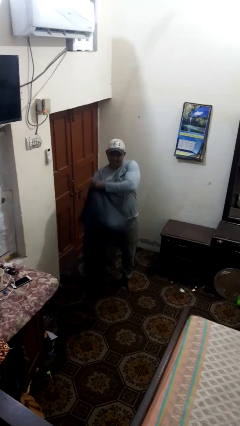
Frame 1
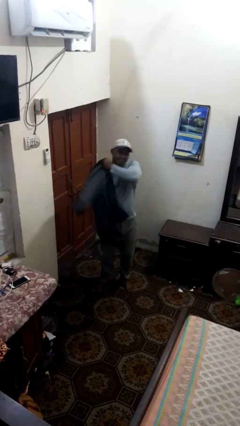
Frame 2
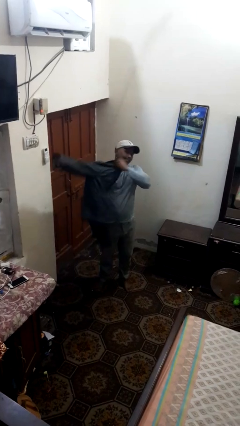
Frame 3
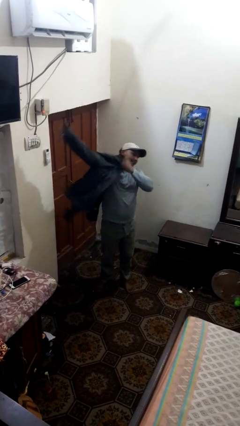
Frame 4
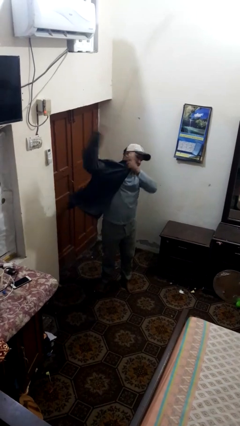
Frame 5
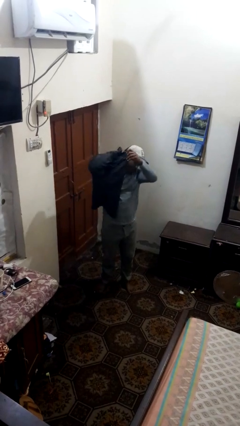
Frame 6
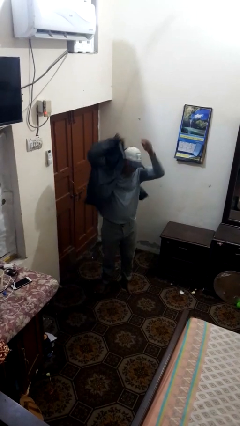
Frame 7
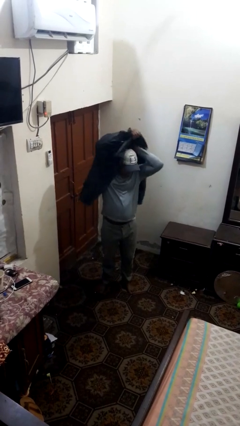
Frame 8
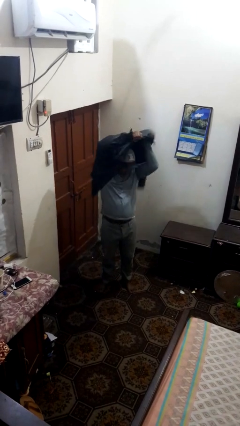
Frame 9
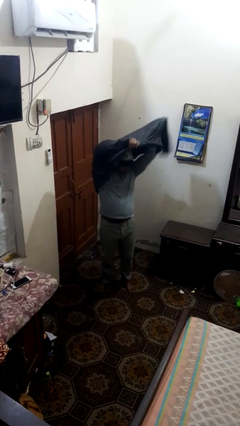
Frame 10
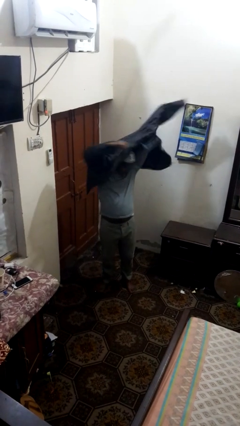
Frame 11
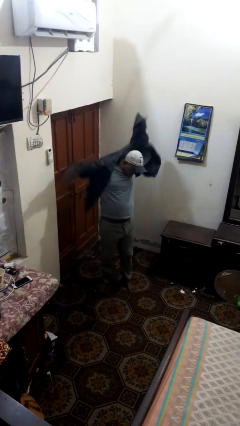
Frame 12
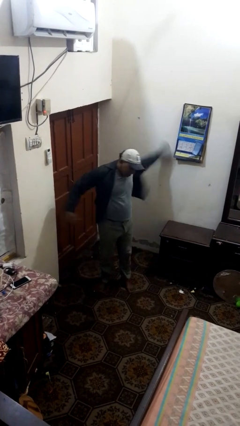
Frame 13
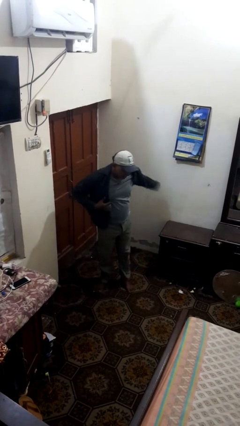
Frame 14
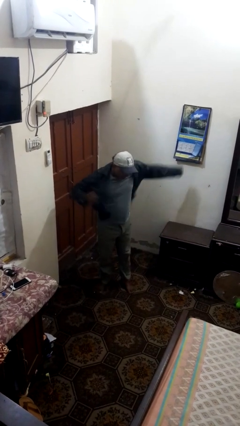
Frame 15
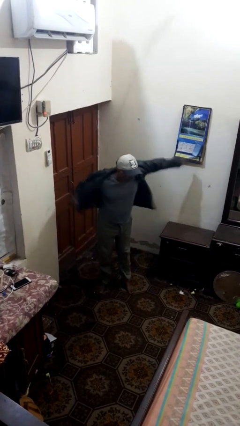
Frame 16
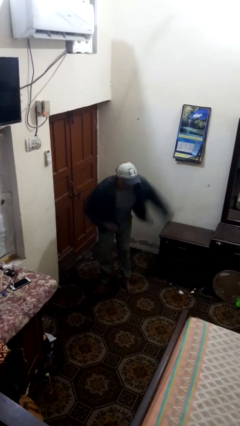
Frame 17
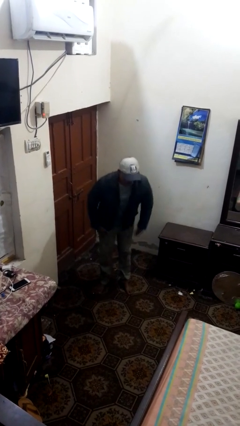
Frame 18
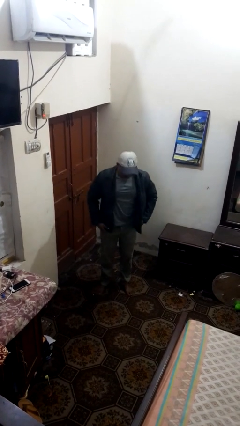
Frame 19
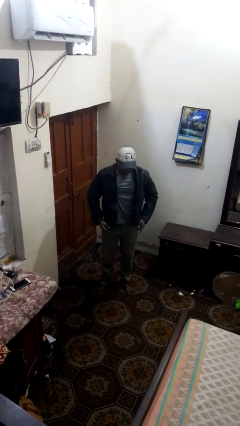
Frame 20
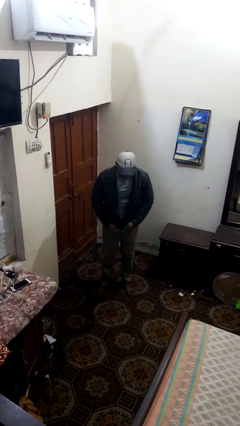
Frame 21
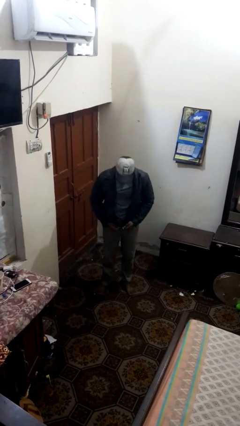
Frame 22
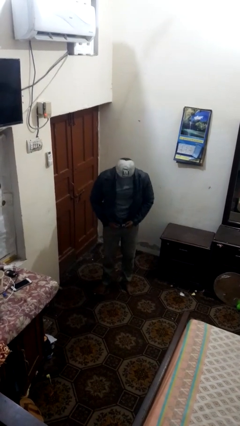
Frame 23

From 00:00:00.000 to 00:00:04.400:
person puts on jacket

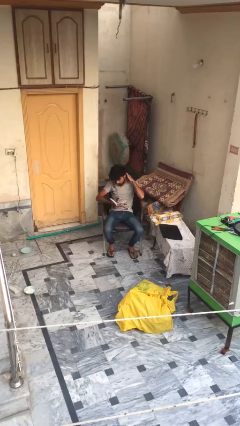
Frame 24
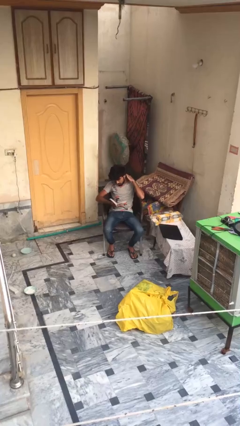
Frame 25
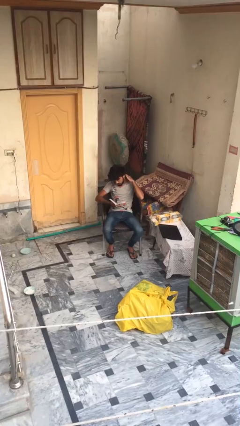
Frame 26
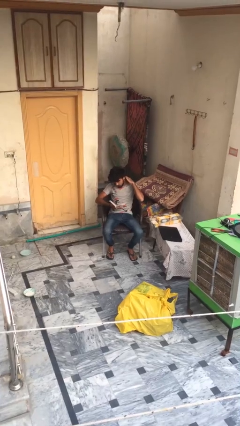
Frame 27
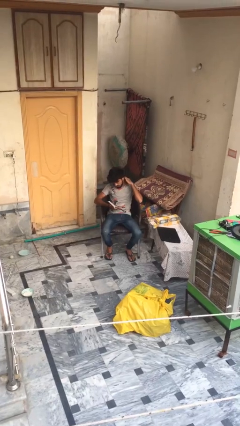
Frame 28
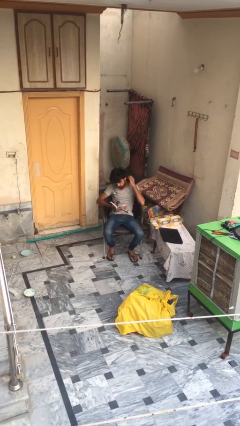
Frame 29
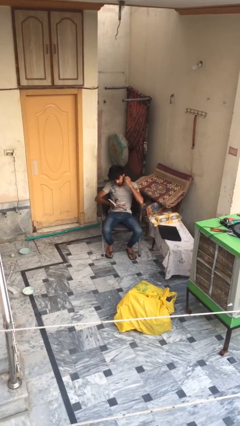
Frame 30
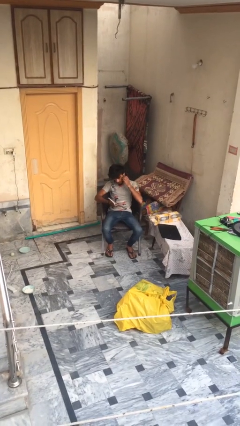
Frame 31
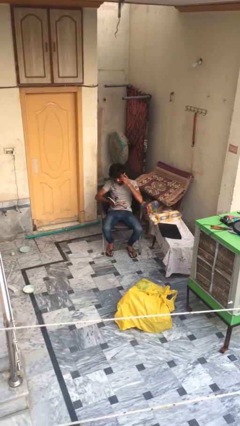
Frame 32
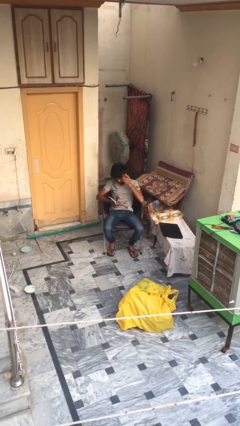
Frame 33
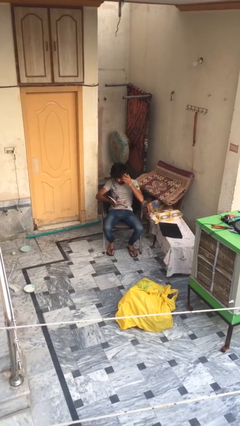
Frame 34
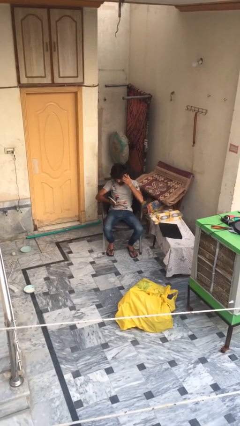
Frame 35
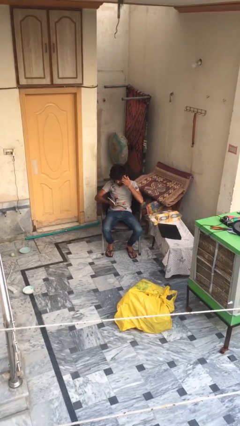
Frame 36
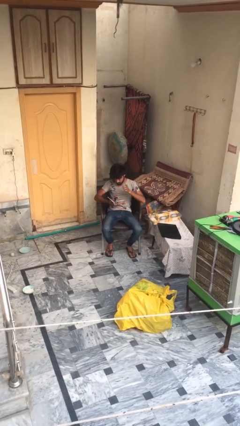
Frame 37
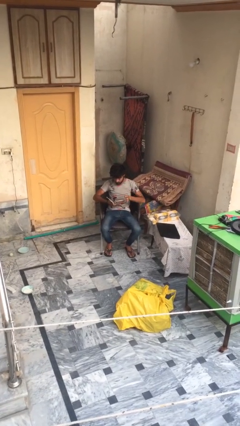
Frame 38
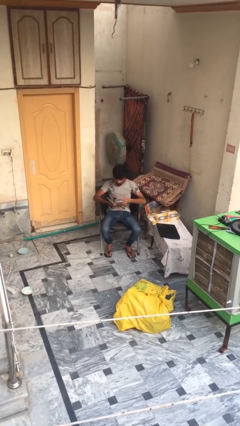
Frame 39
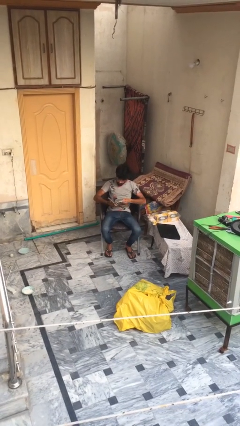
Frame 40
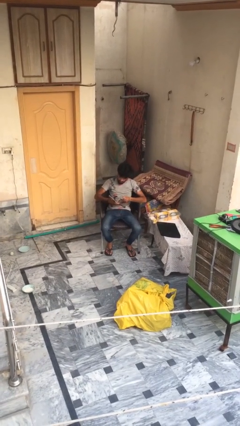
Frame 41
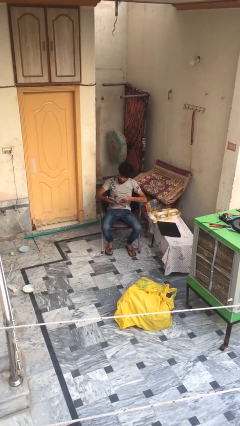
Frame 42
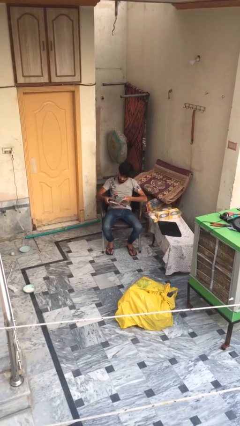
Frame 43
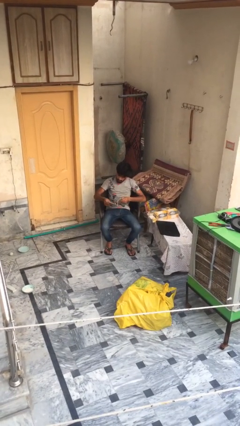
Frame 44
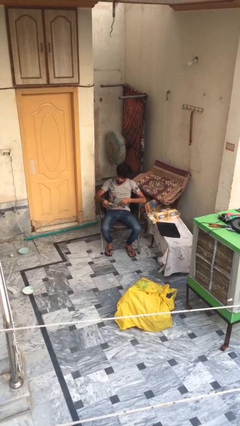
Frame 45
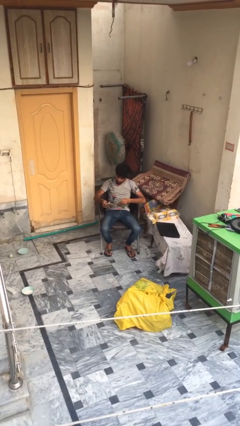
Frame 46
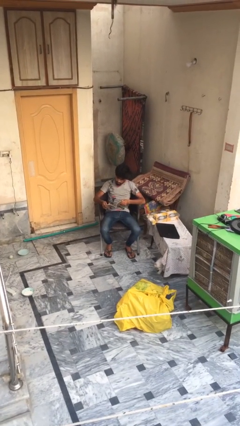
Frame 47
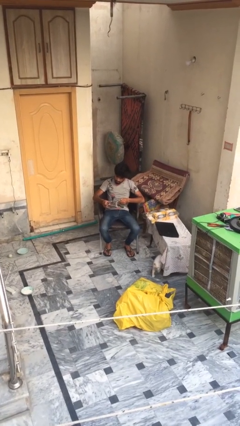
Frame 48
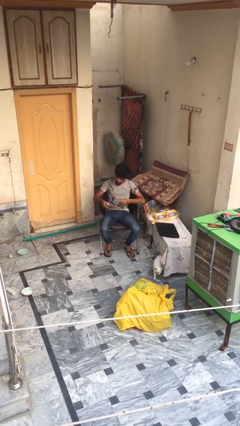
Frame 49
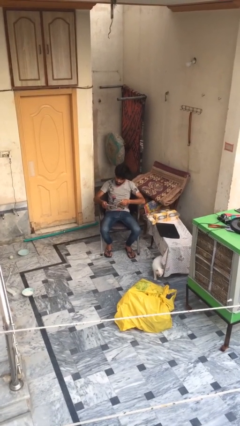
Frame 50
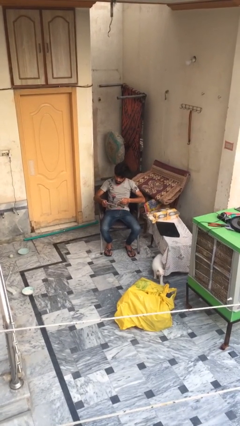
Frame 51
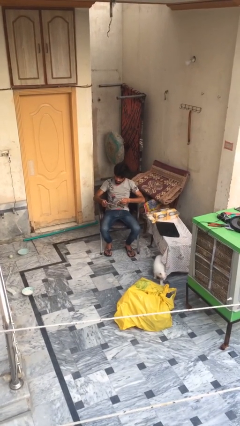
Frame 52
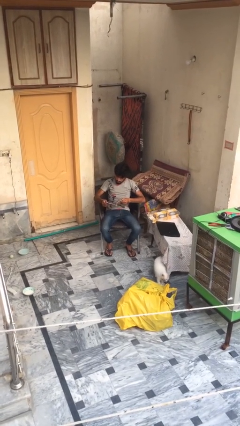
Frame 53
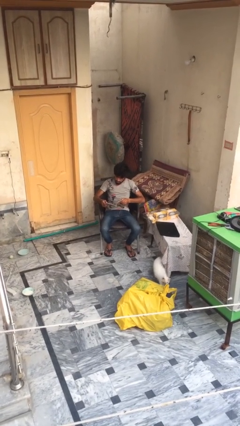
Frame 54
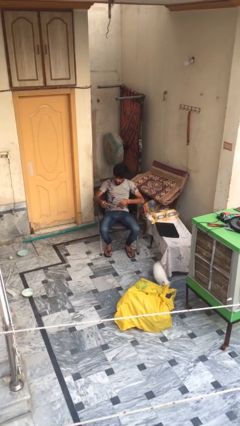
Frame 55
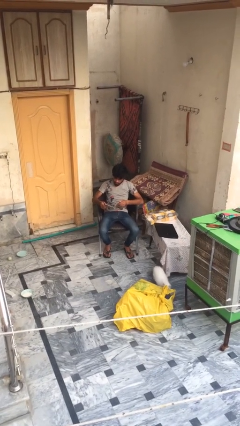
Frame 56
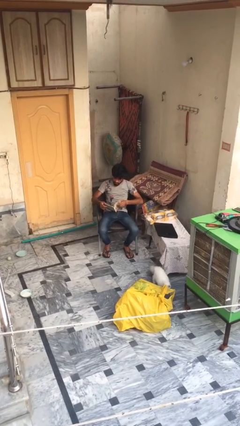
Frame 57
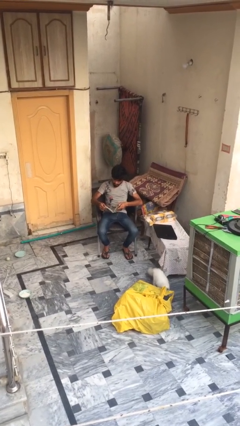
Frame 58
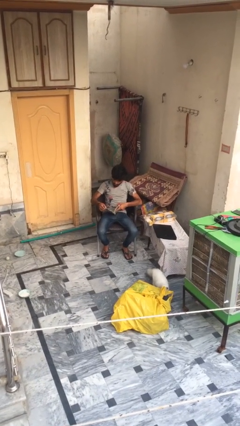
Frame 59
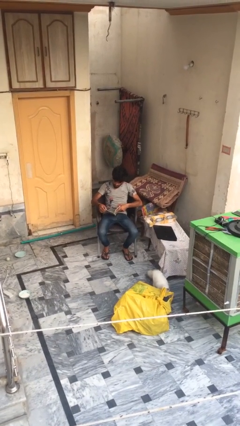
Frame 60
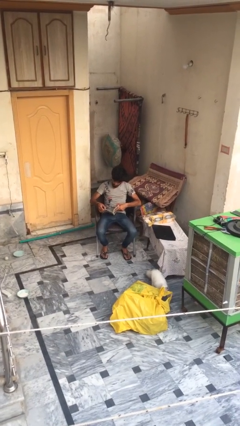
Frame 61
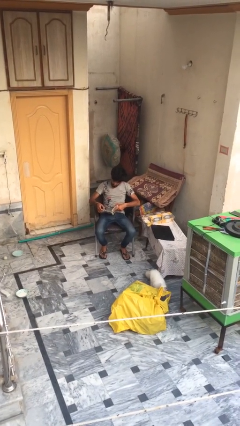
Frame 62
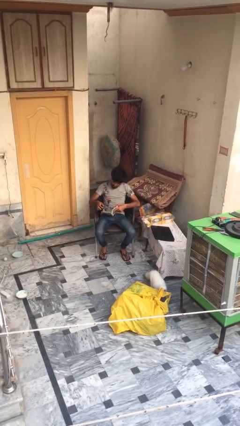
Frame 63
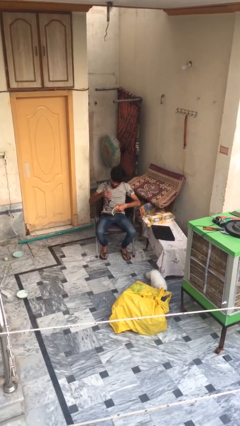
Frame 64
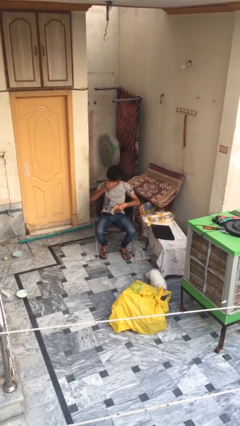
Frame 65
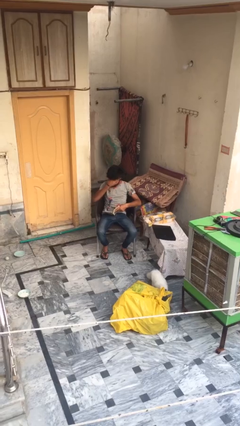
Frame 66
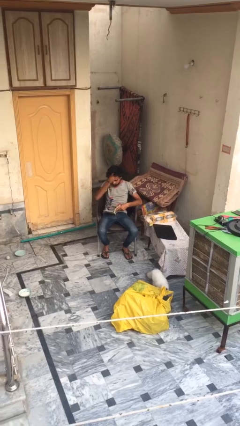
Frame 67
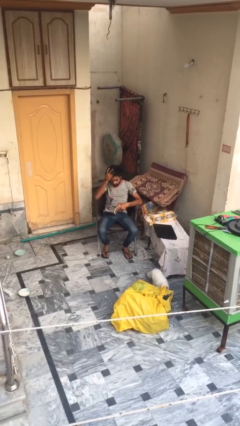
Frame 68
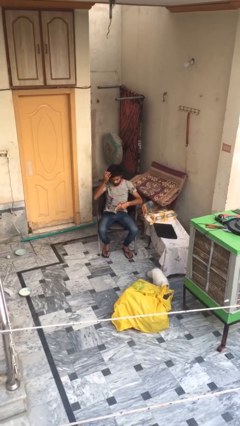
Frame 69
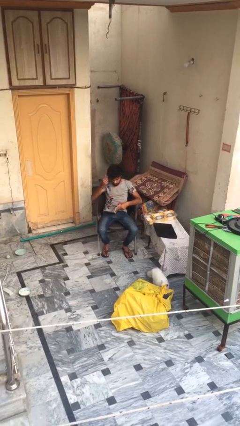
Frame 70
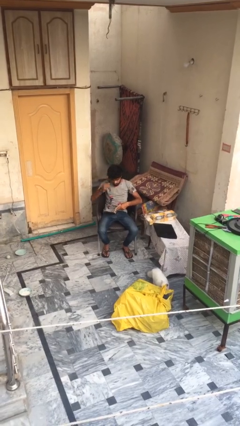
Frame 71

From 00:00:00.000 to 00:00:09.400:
person reads document

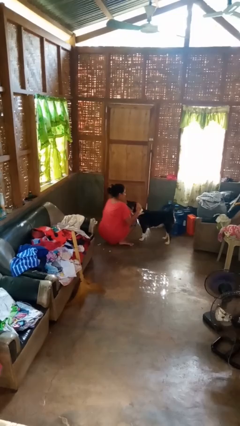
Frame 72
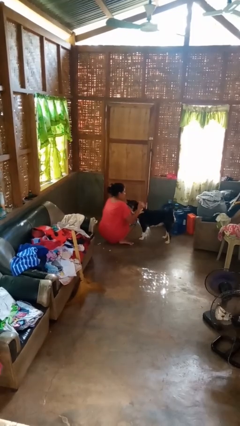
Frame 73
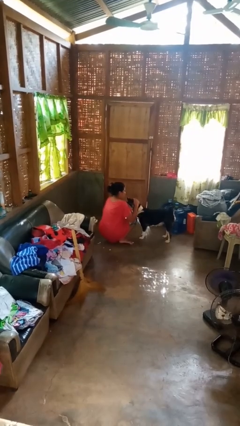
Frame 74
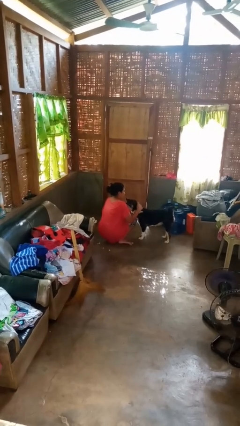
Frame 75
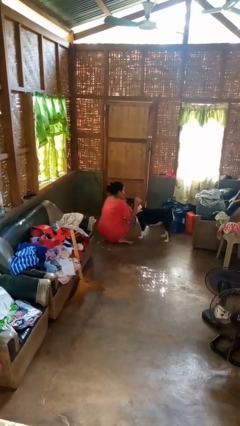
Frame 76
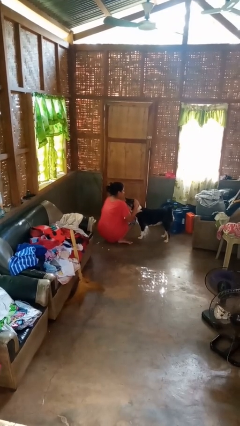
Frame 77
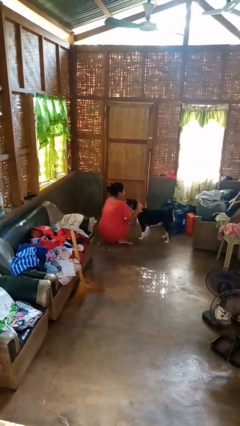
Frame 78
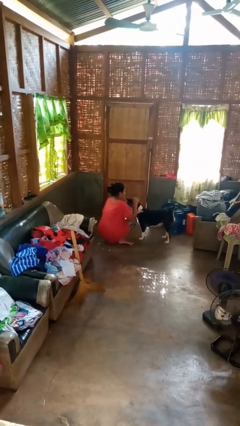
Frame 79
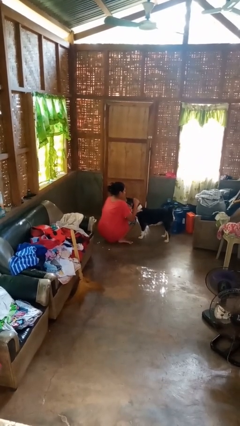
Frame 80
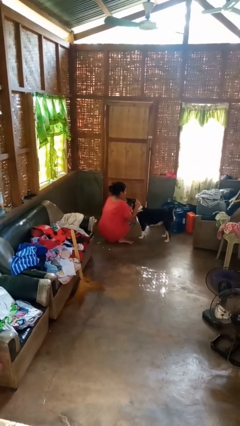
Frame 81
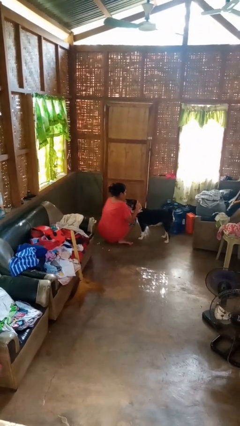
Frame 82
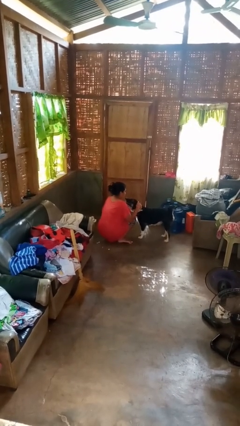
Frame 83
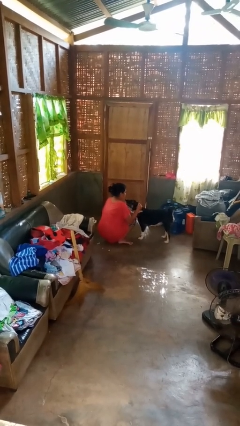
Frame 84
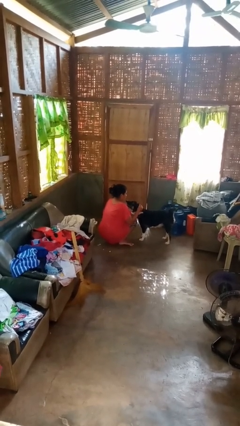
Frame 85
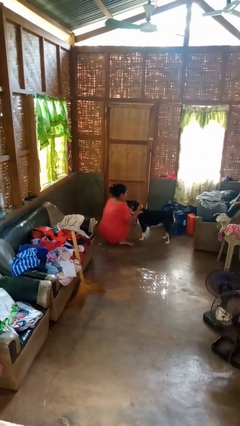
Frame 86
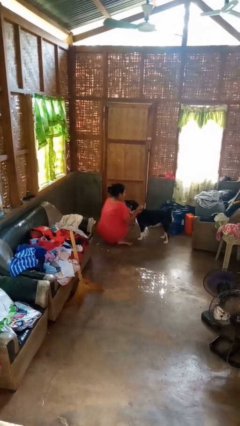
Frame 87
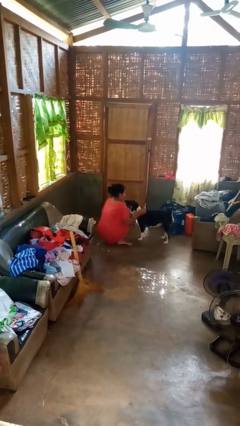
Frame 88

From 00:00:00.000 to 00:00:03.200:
person pets dog

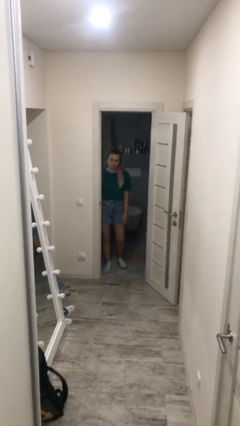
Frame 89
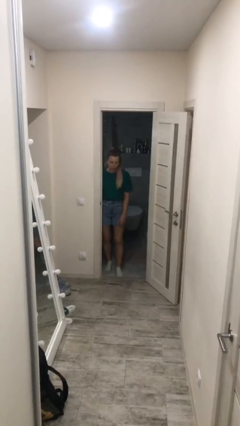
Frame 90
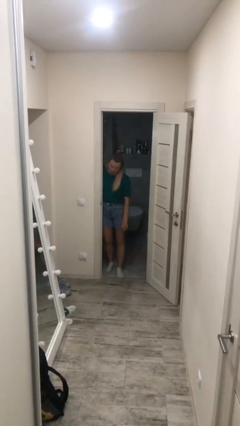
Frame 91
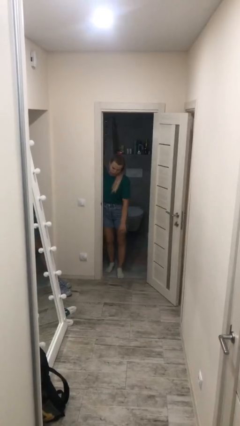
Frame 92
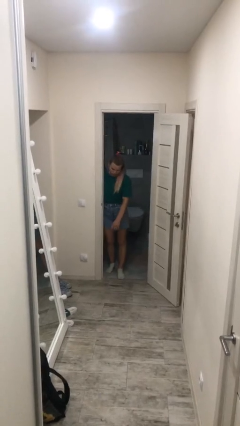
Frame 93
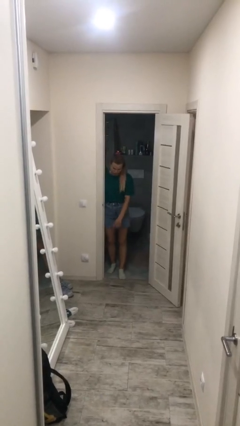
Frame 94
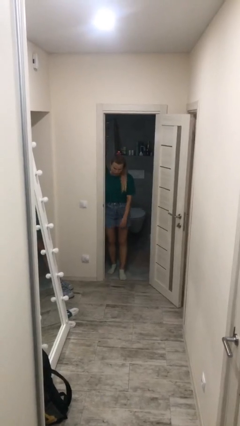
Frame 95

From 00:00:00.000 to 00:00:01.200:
person bumps into wall
